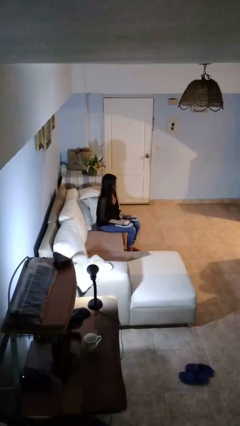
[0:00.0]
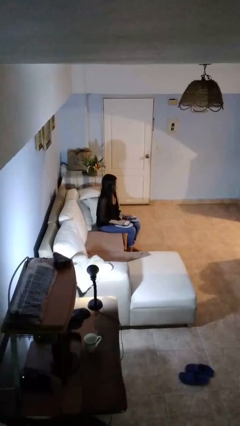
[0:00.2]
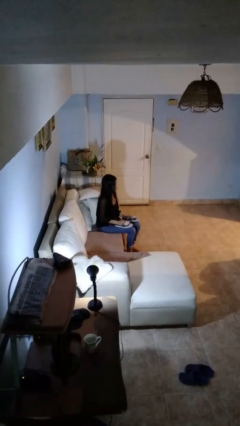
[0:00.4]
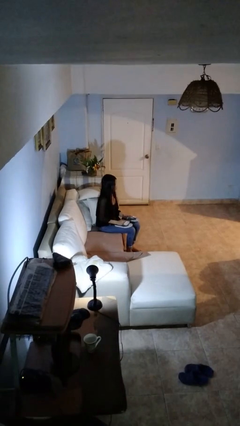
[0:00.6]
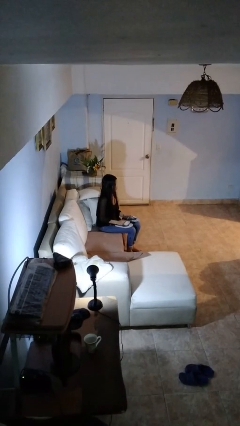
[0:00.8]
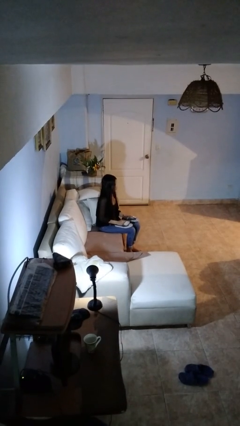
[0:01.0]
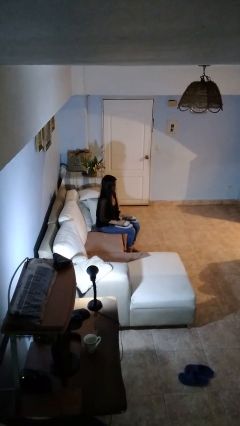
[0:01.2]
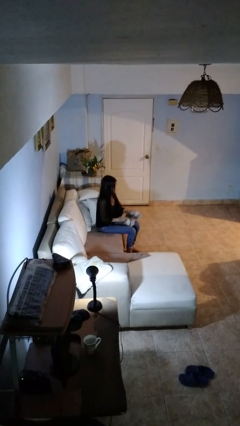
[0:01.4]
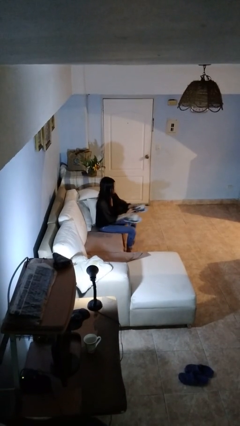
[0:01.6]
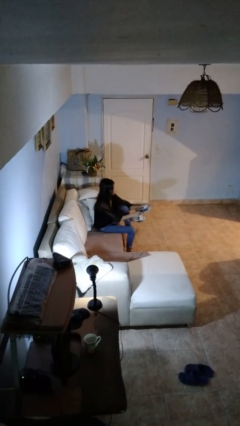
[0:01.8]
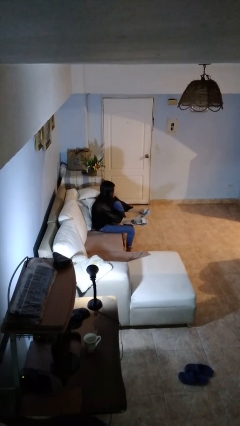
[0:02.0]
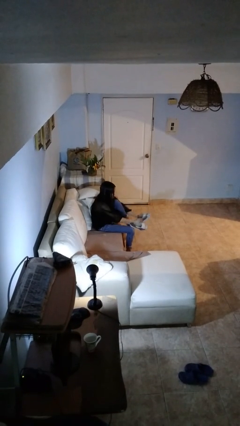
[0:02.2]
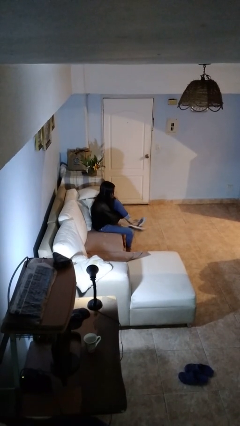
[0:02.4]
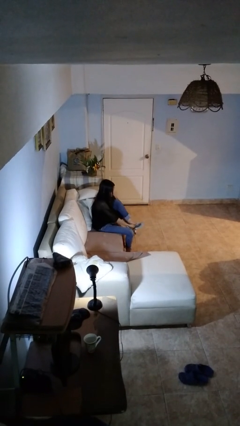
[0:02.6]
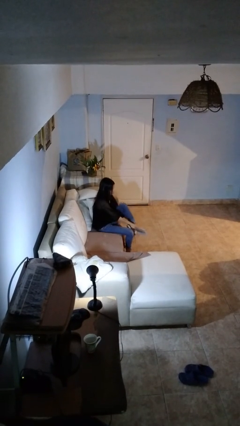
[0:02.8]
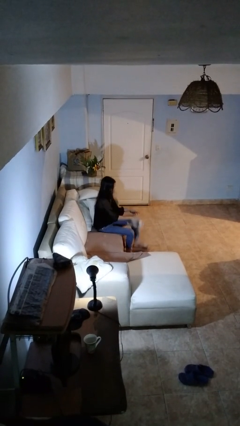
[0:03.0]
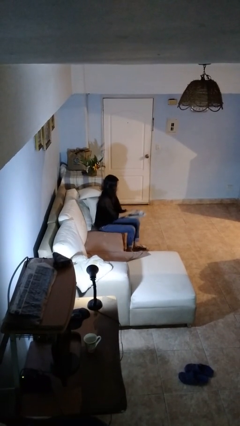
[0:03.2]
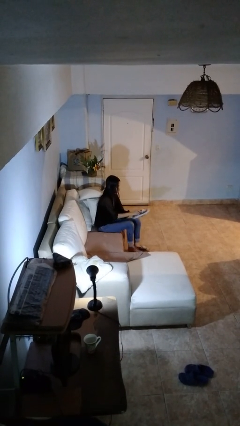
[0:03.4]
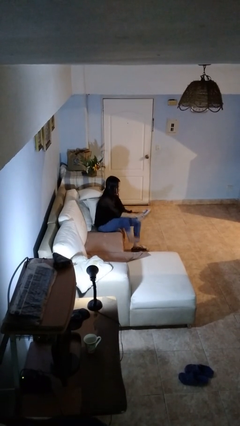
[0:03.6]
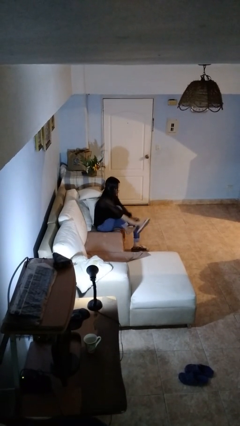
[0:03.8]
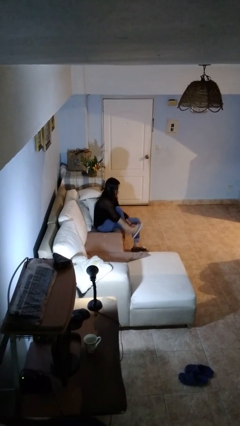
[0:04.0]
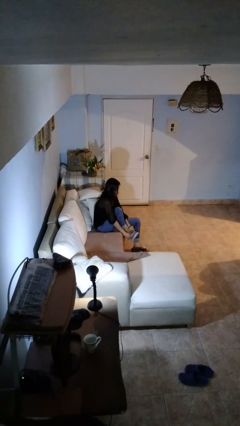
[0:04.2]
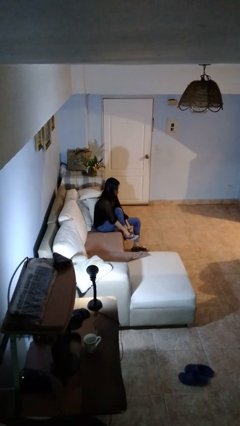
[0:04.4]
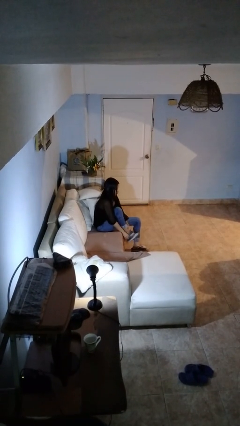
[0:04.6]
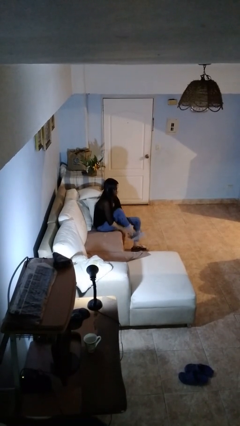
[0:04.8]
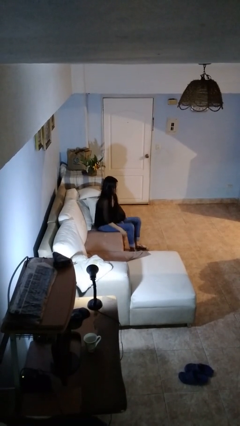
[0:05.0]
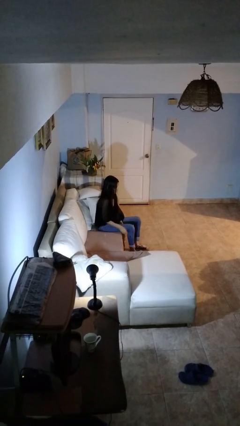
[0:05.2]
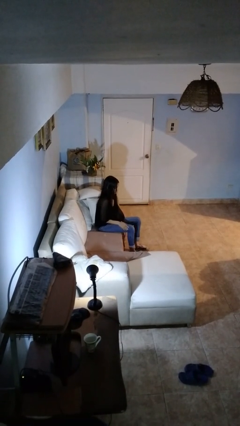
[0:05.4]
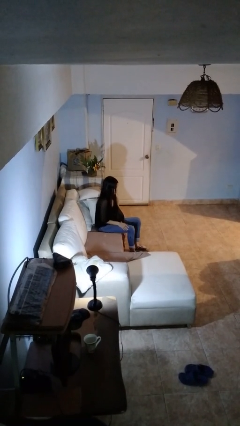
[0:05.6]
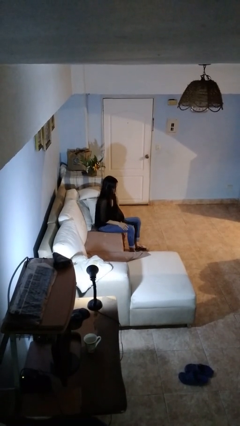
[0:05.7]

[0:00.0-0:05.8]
person puts on shoes

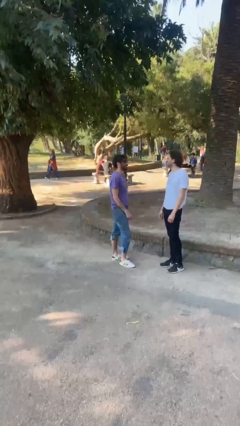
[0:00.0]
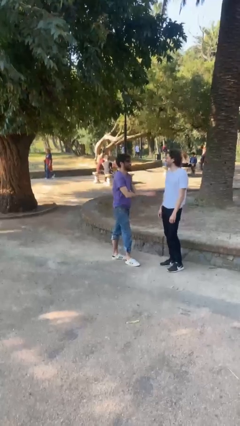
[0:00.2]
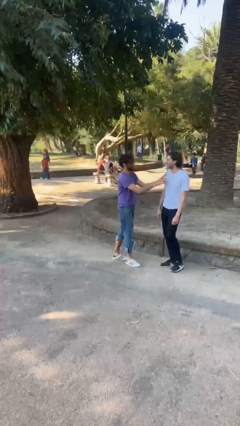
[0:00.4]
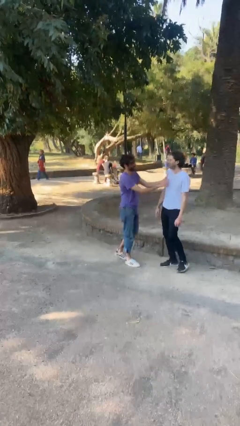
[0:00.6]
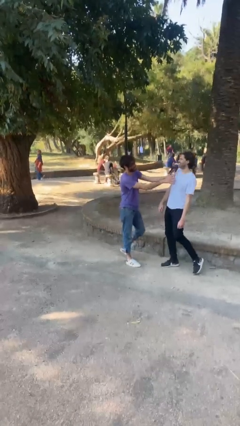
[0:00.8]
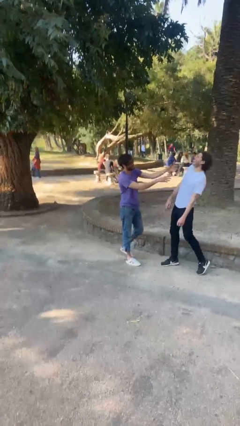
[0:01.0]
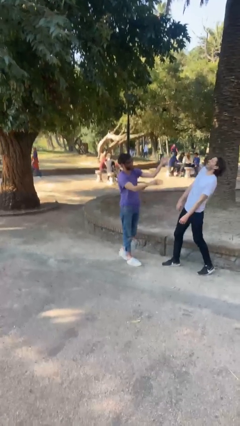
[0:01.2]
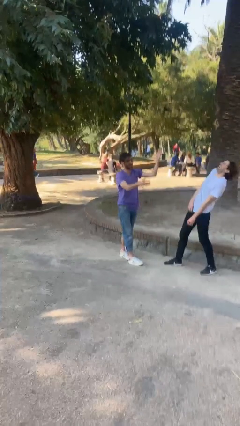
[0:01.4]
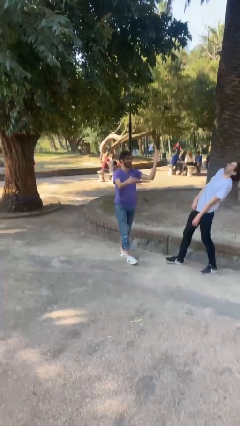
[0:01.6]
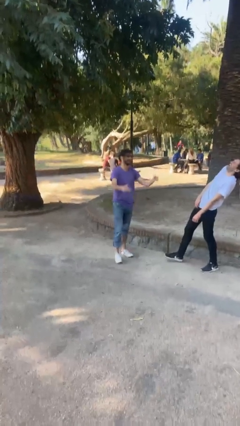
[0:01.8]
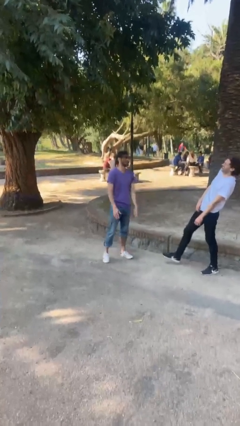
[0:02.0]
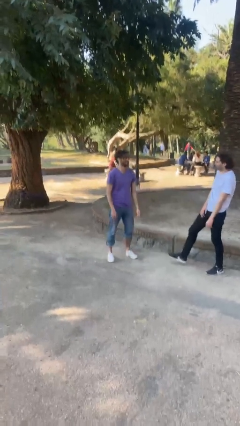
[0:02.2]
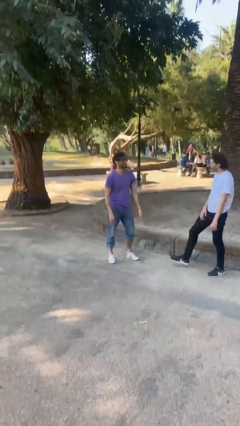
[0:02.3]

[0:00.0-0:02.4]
person shoves person

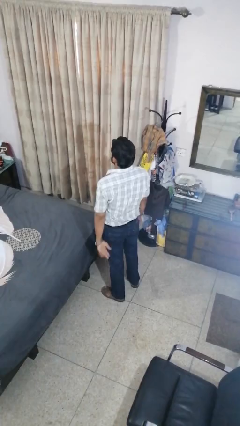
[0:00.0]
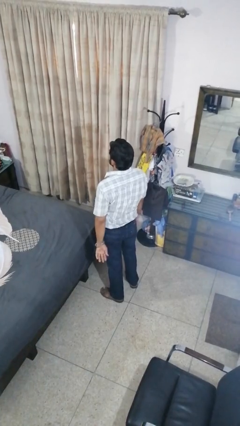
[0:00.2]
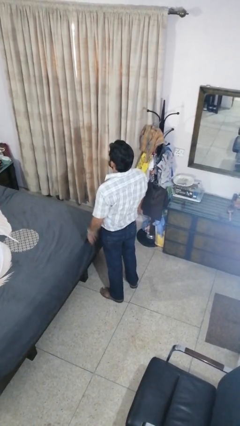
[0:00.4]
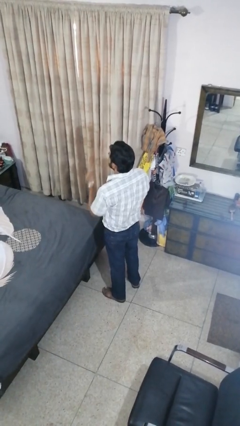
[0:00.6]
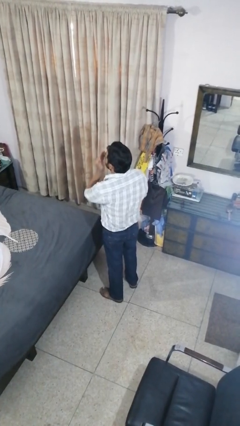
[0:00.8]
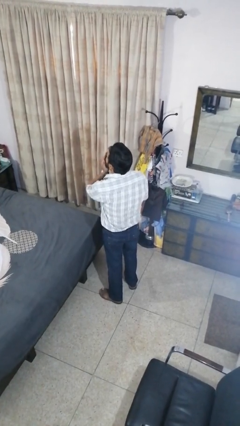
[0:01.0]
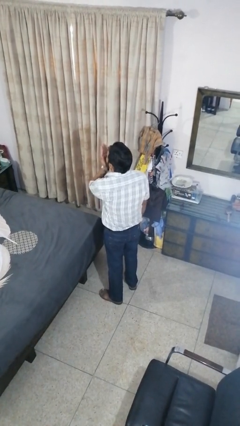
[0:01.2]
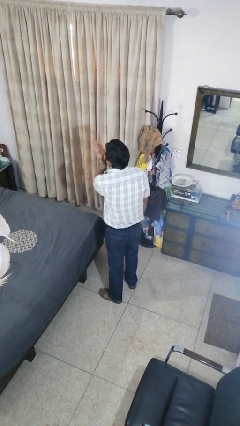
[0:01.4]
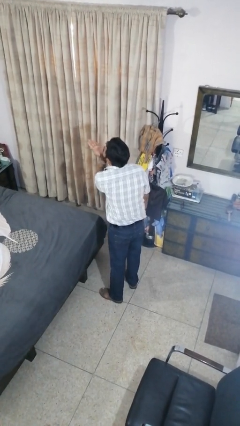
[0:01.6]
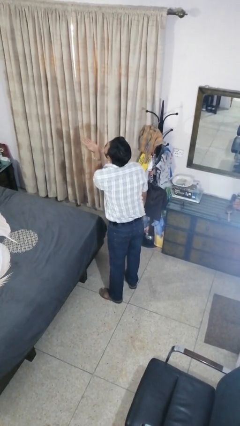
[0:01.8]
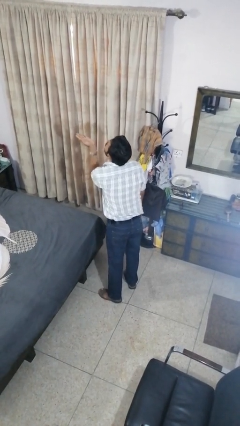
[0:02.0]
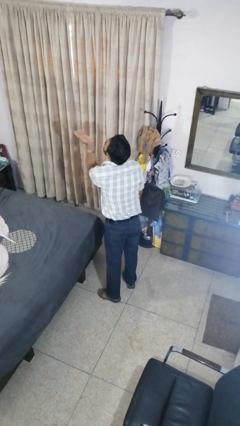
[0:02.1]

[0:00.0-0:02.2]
person gestures blow kiss

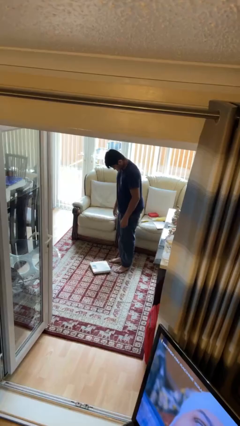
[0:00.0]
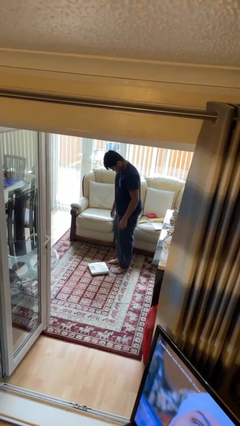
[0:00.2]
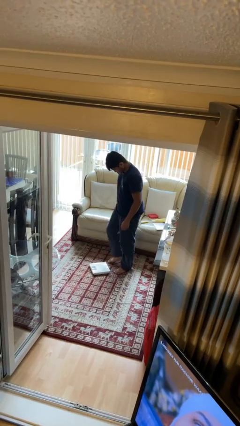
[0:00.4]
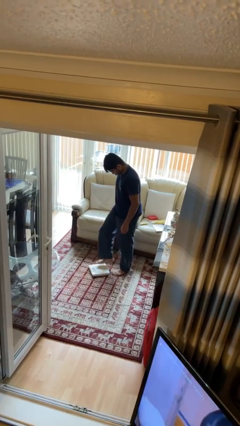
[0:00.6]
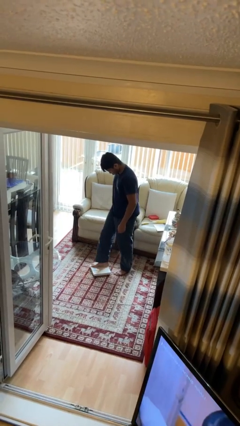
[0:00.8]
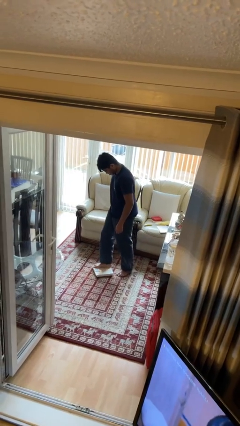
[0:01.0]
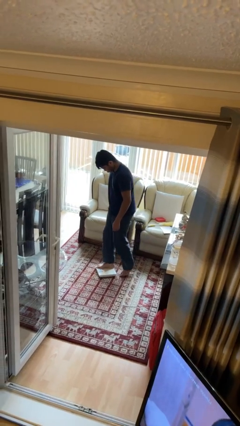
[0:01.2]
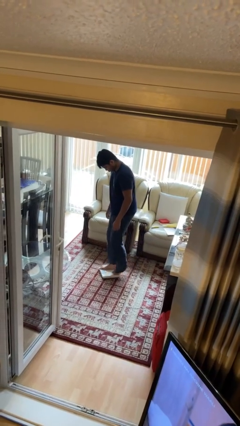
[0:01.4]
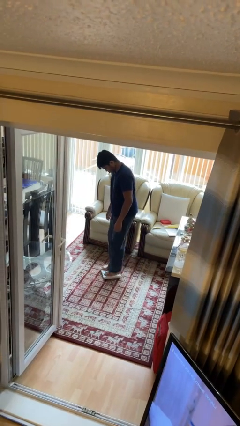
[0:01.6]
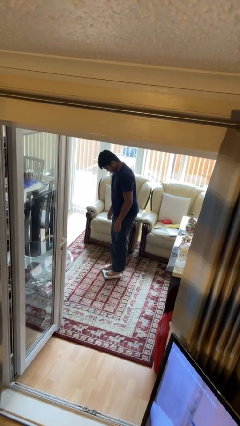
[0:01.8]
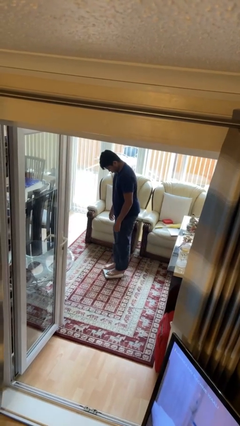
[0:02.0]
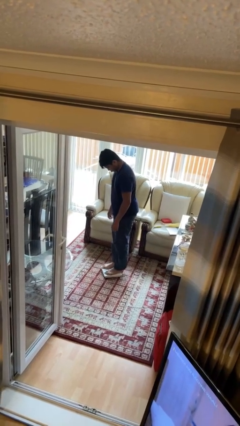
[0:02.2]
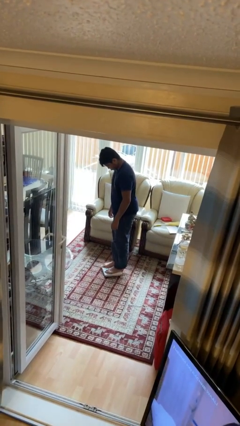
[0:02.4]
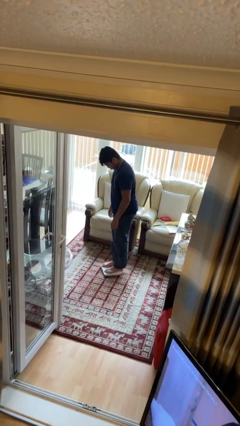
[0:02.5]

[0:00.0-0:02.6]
person uses bodyweight scale

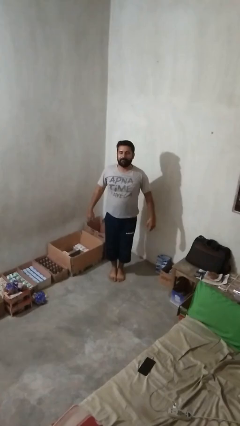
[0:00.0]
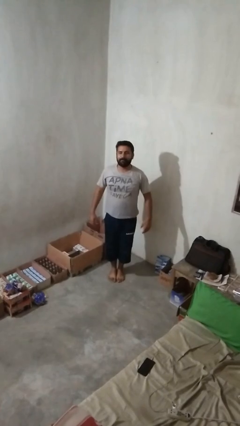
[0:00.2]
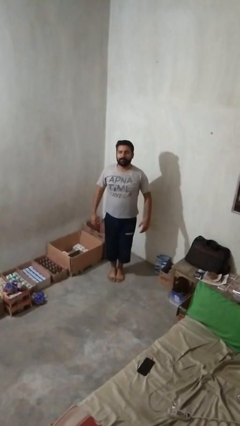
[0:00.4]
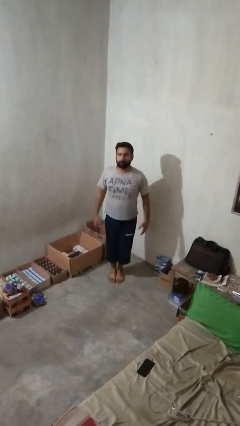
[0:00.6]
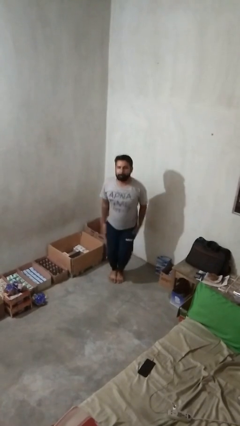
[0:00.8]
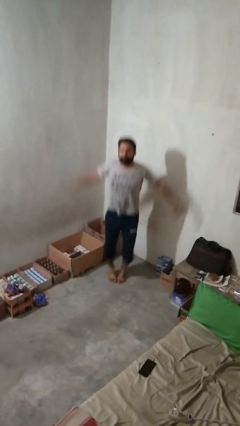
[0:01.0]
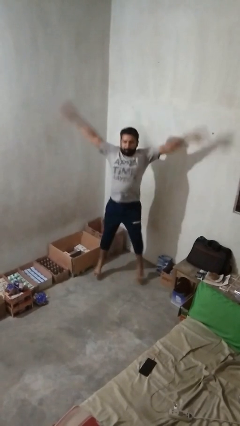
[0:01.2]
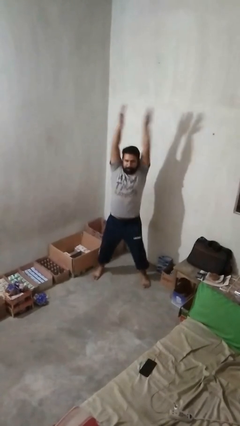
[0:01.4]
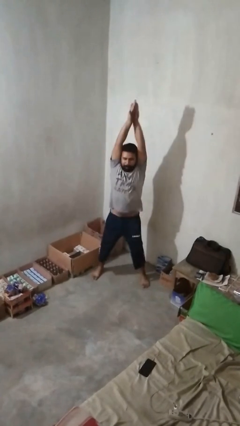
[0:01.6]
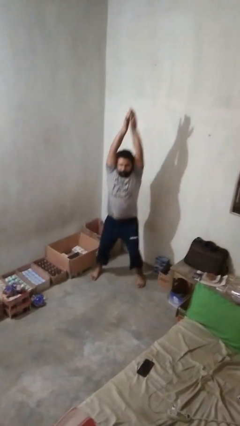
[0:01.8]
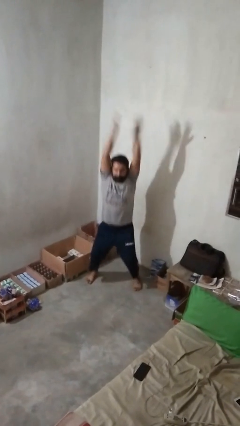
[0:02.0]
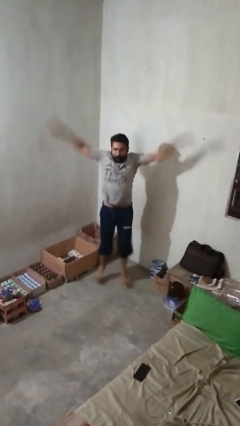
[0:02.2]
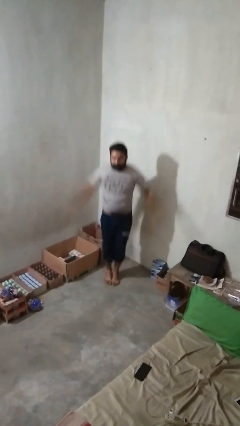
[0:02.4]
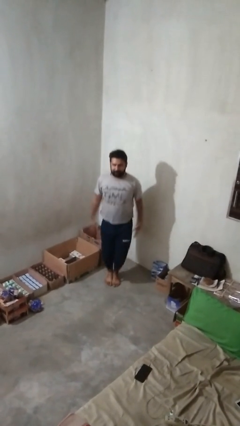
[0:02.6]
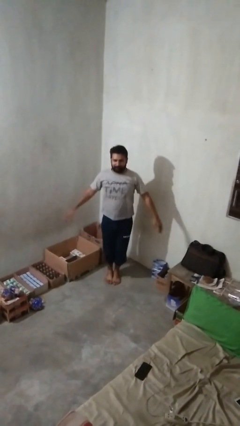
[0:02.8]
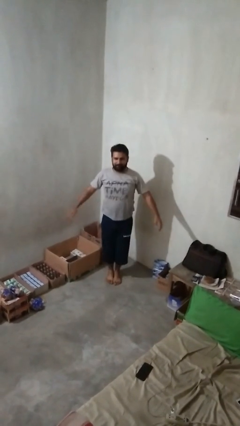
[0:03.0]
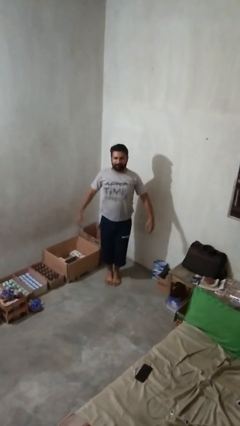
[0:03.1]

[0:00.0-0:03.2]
person exercises with jumping jacks

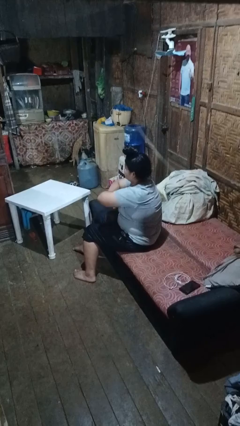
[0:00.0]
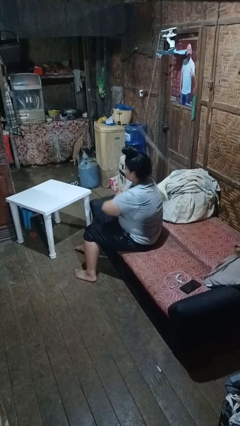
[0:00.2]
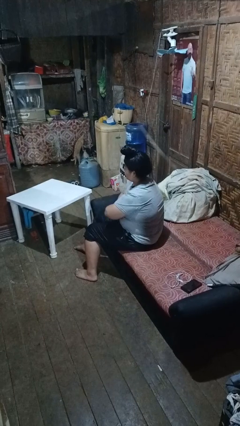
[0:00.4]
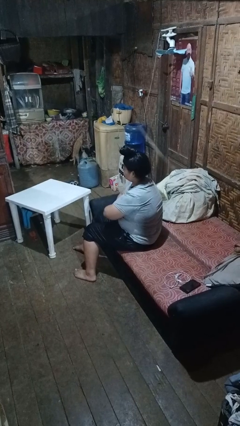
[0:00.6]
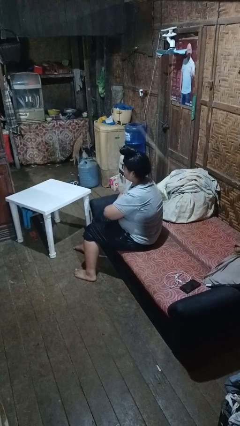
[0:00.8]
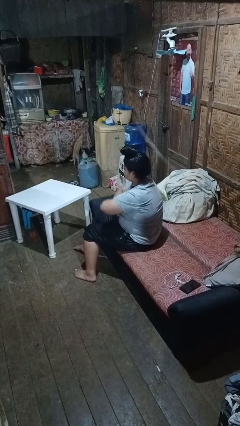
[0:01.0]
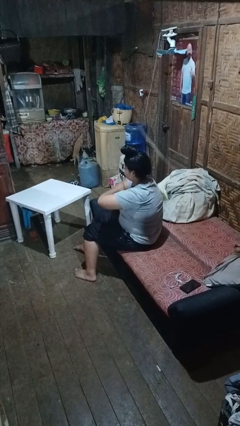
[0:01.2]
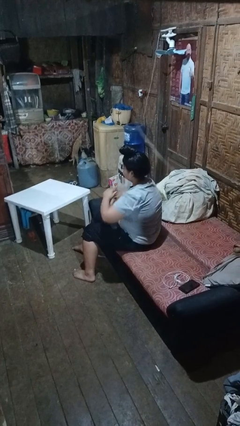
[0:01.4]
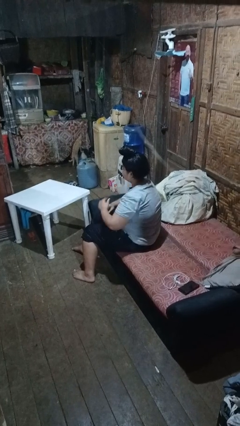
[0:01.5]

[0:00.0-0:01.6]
person crosses arms
